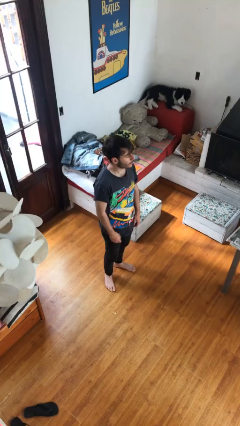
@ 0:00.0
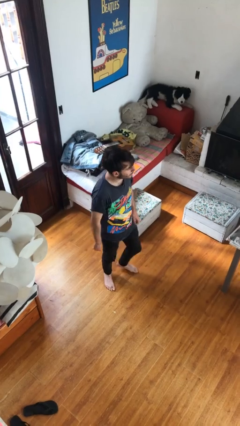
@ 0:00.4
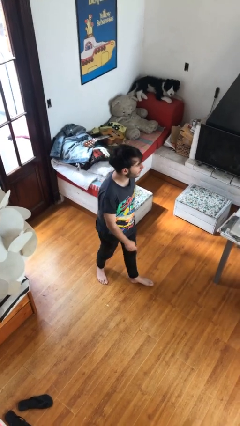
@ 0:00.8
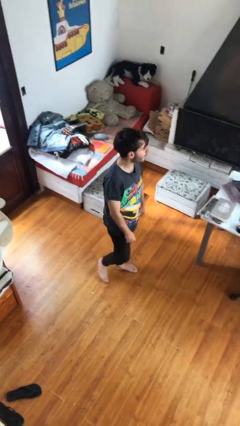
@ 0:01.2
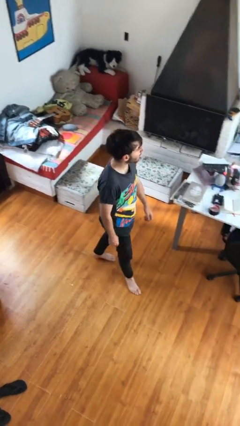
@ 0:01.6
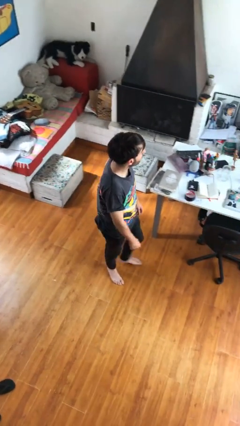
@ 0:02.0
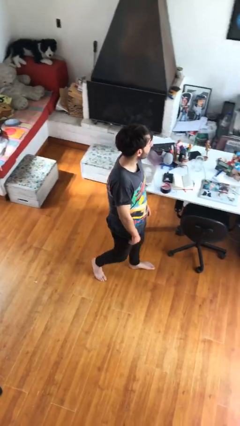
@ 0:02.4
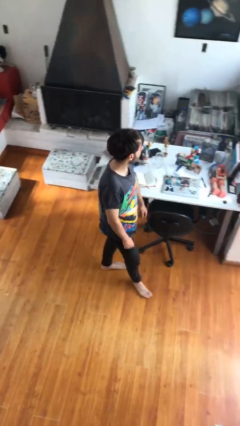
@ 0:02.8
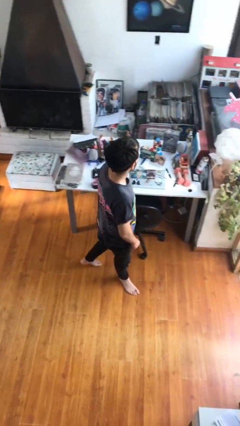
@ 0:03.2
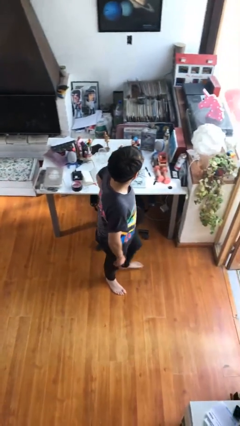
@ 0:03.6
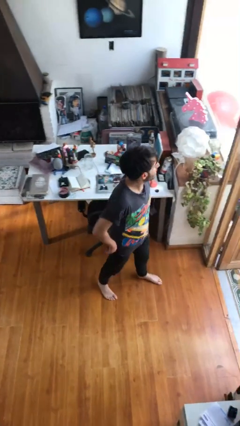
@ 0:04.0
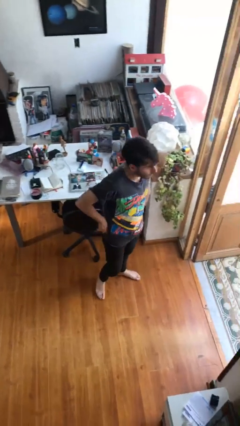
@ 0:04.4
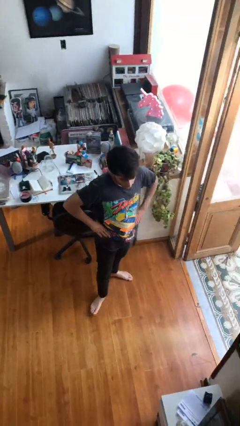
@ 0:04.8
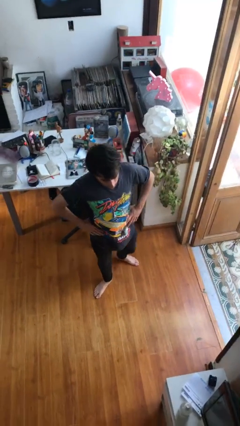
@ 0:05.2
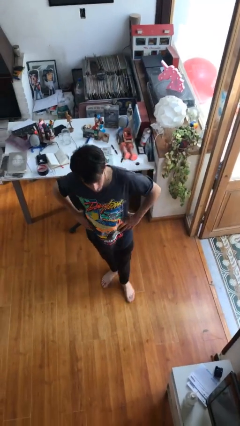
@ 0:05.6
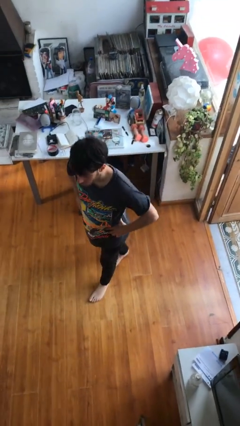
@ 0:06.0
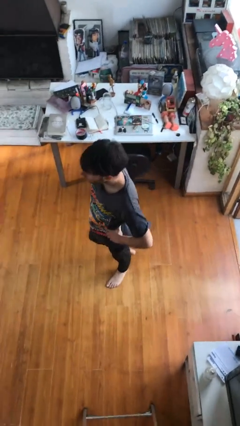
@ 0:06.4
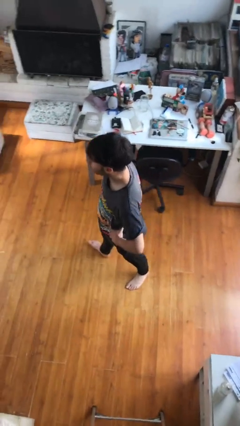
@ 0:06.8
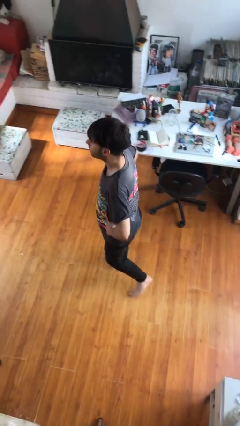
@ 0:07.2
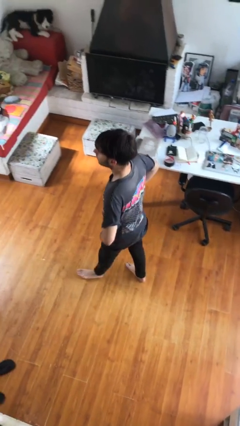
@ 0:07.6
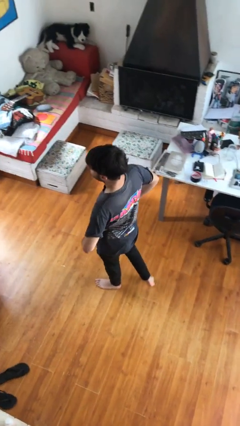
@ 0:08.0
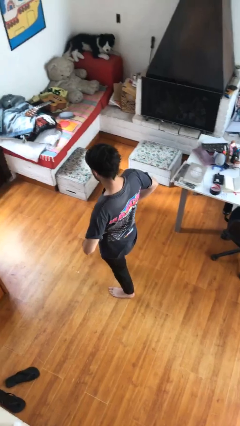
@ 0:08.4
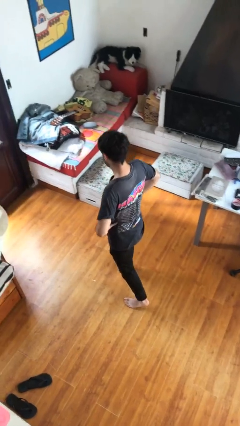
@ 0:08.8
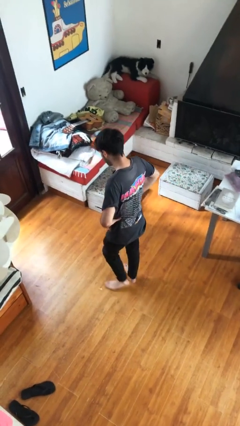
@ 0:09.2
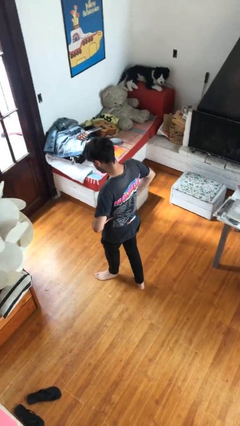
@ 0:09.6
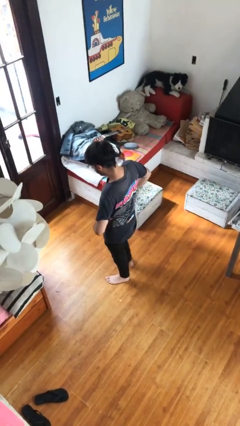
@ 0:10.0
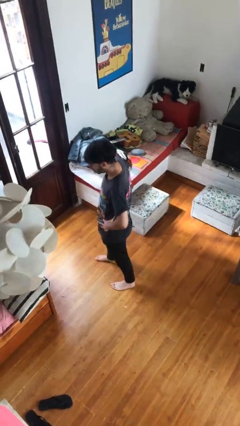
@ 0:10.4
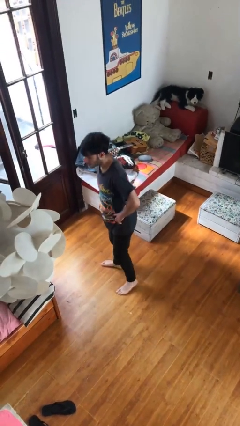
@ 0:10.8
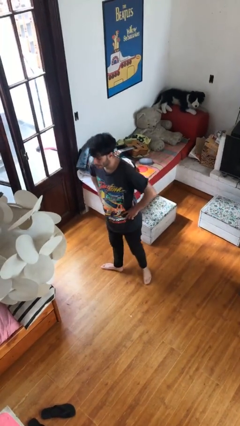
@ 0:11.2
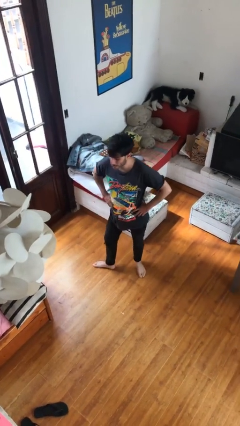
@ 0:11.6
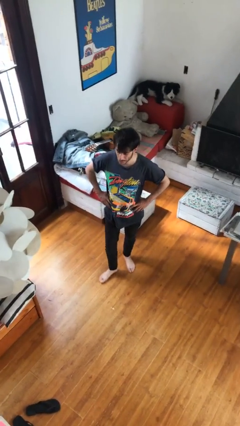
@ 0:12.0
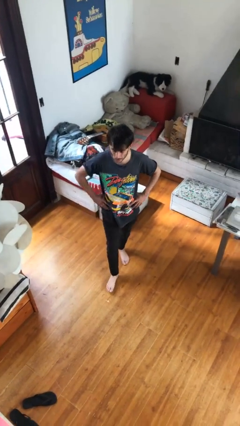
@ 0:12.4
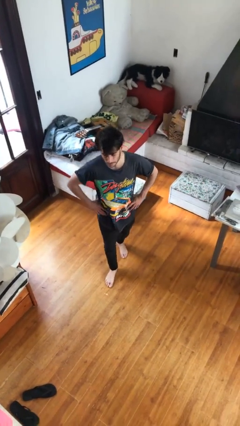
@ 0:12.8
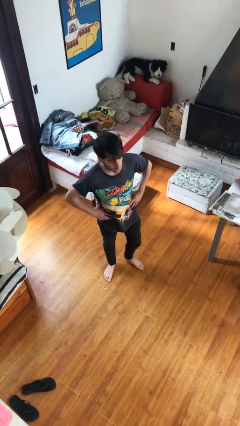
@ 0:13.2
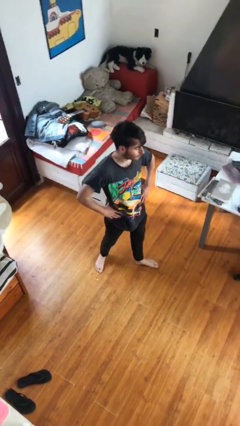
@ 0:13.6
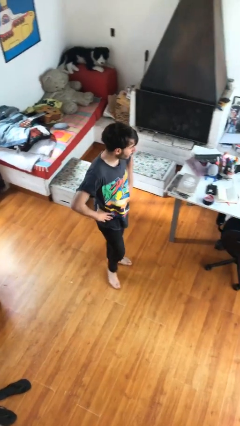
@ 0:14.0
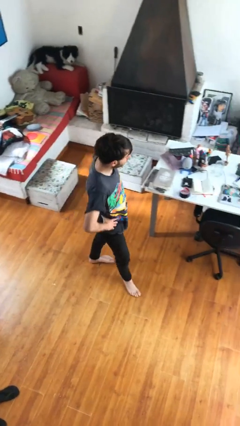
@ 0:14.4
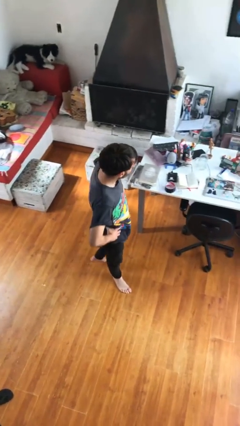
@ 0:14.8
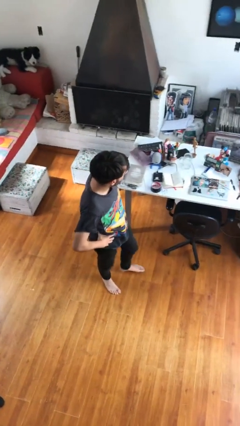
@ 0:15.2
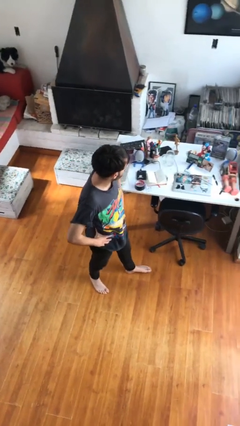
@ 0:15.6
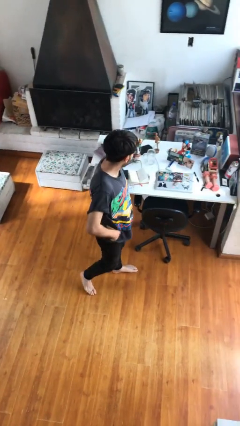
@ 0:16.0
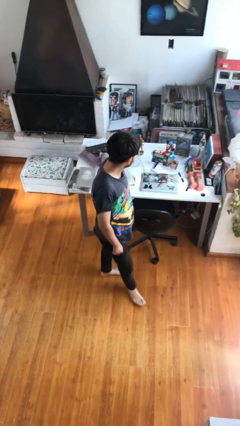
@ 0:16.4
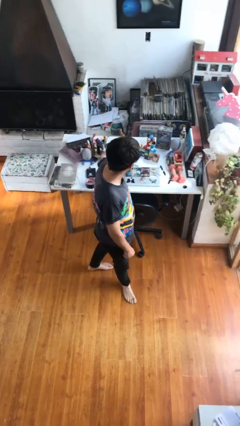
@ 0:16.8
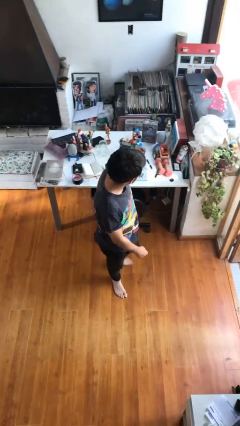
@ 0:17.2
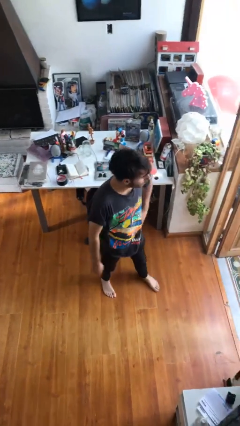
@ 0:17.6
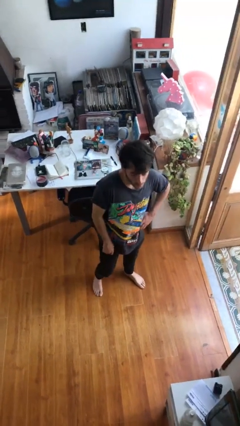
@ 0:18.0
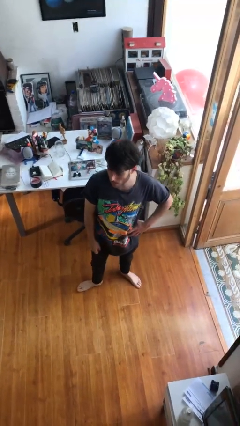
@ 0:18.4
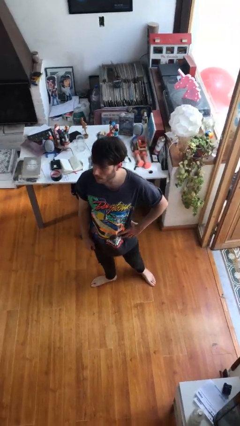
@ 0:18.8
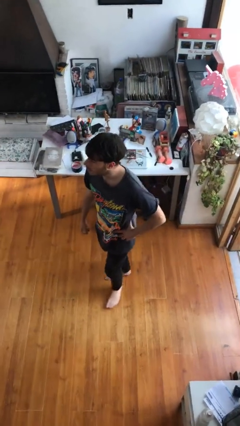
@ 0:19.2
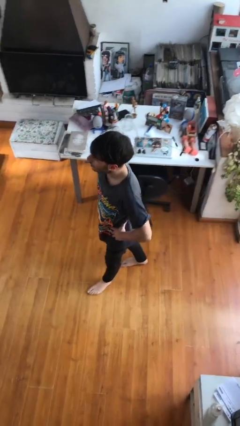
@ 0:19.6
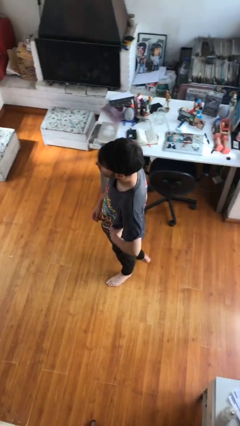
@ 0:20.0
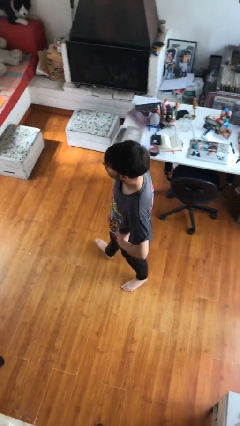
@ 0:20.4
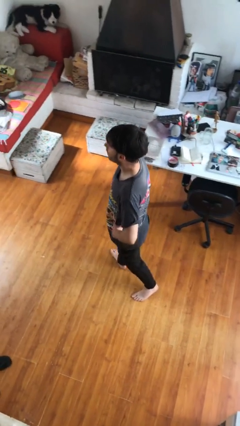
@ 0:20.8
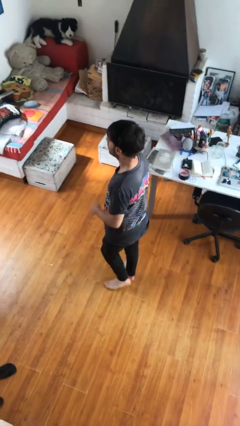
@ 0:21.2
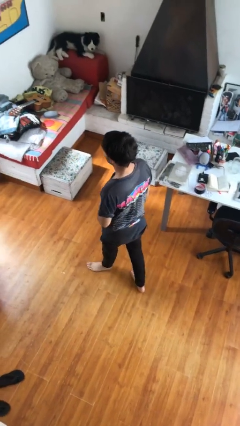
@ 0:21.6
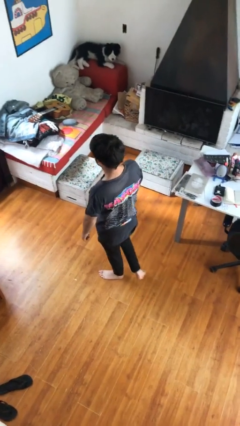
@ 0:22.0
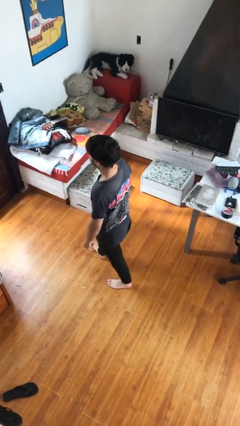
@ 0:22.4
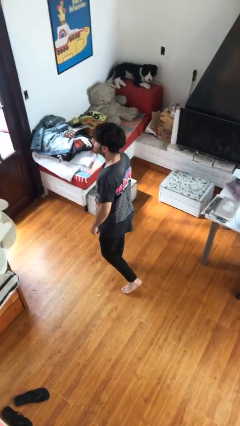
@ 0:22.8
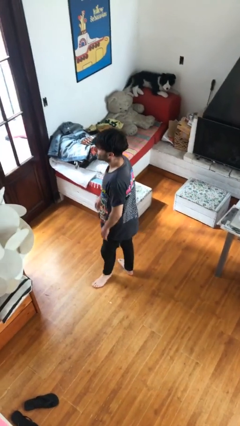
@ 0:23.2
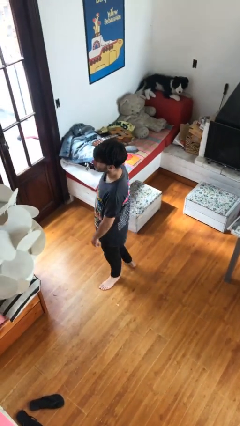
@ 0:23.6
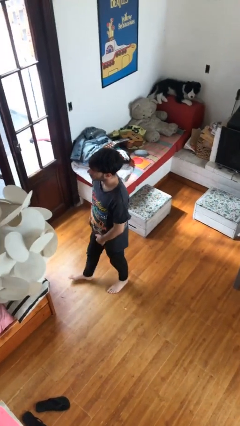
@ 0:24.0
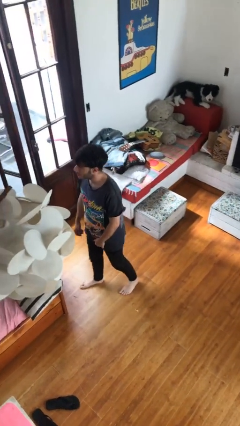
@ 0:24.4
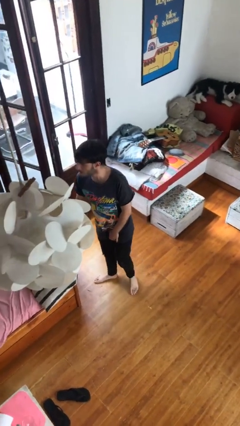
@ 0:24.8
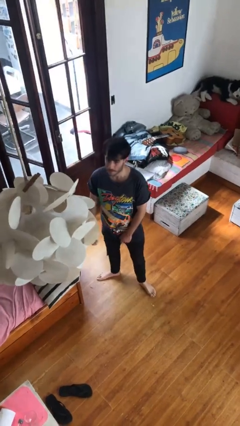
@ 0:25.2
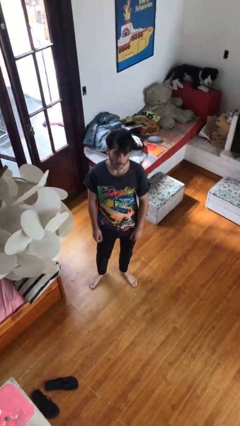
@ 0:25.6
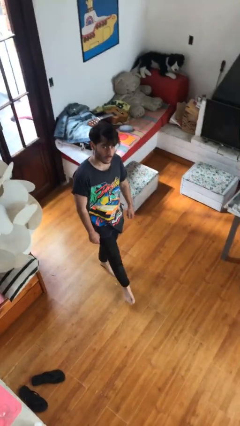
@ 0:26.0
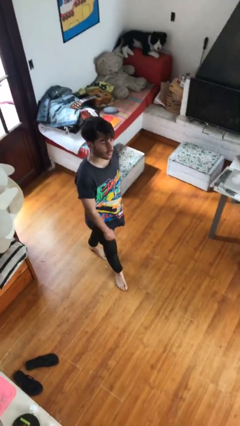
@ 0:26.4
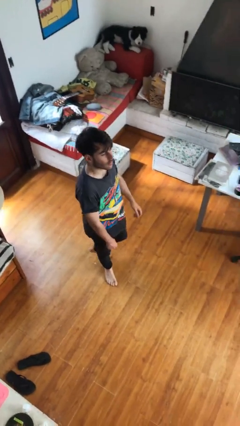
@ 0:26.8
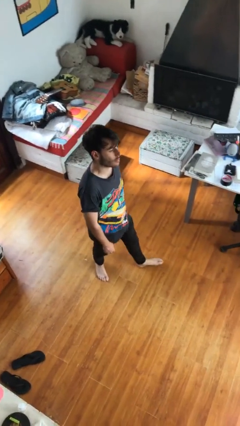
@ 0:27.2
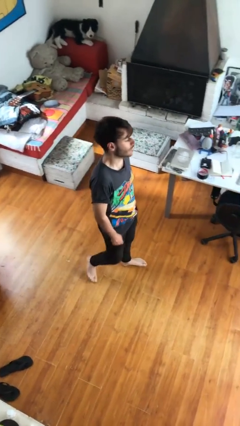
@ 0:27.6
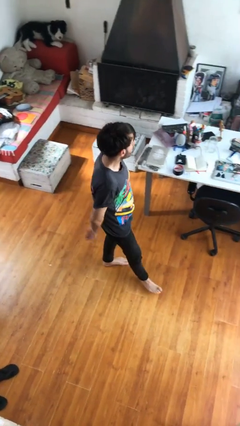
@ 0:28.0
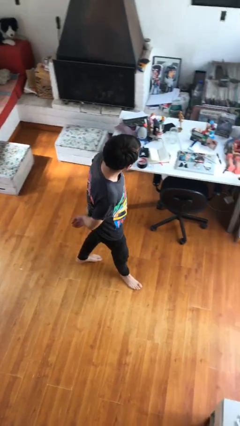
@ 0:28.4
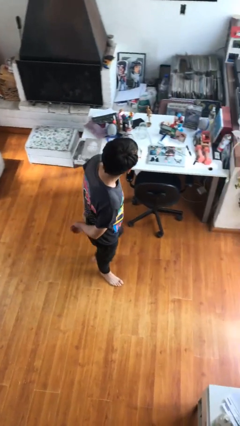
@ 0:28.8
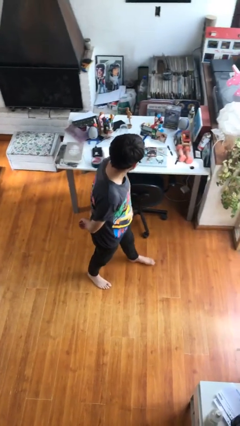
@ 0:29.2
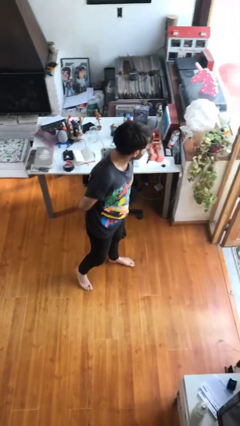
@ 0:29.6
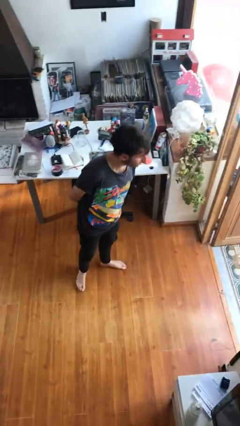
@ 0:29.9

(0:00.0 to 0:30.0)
person walks

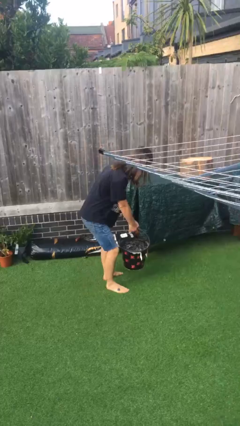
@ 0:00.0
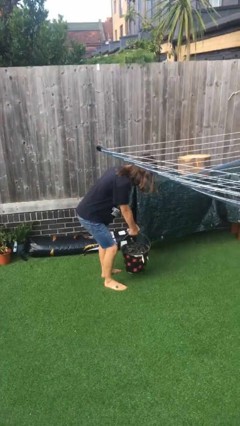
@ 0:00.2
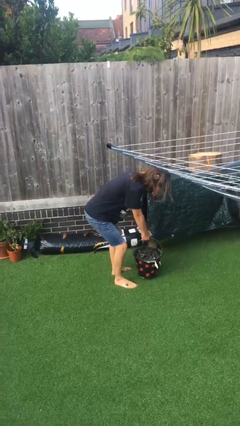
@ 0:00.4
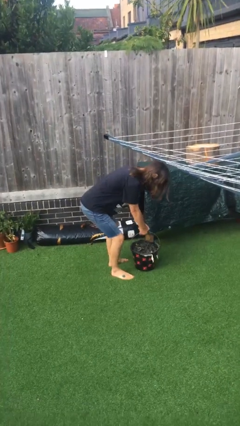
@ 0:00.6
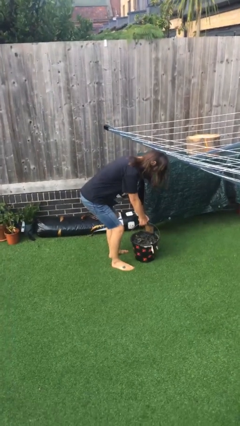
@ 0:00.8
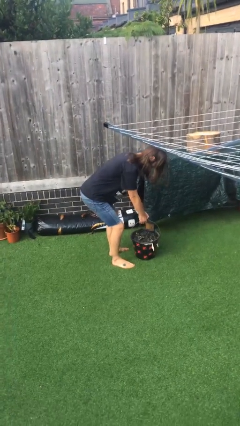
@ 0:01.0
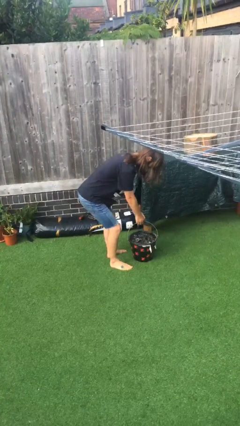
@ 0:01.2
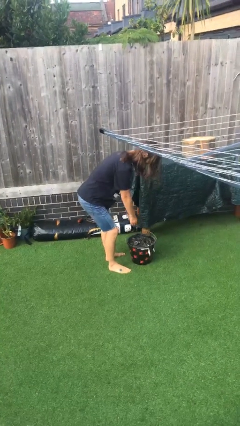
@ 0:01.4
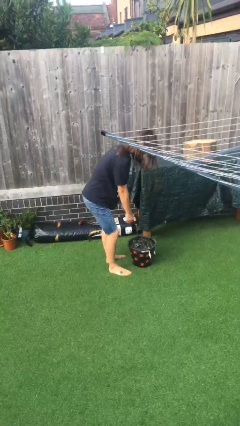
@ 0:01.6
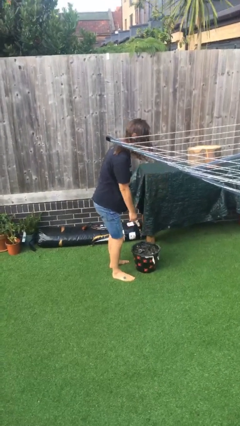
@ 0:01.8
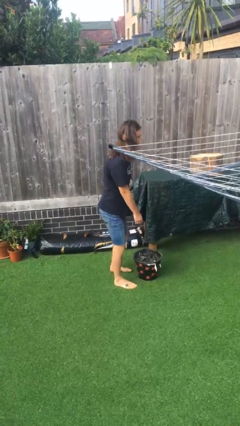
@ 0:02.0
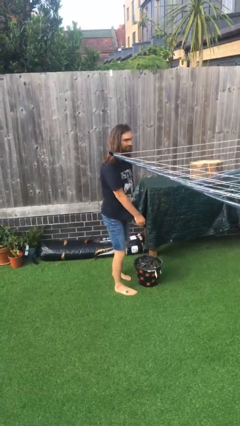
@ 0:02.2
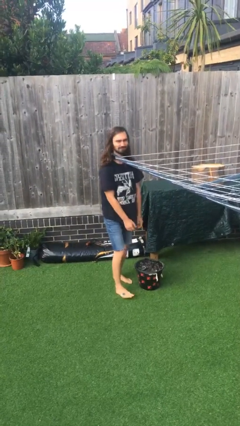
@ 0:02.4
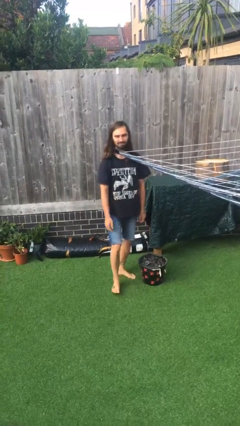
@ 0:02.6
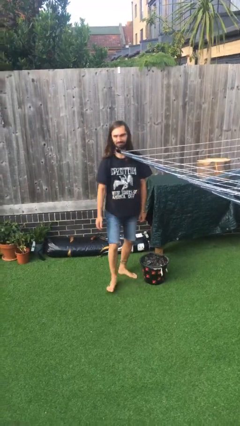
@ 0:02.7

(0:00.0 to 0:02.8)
person puts down object on floor
